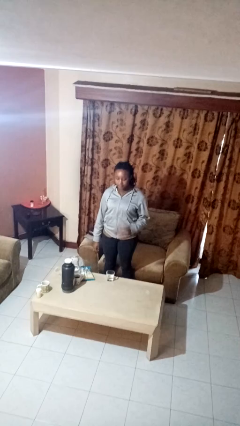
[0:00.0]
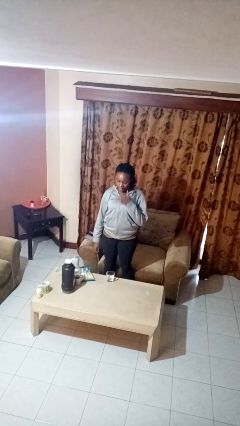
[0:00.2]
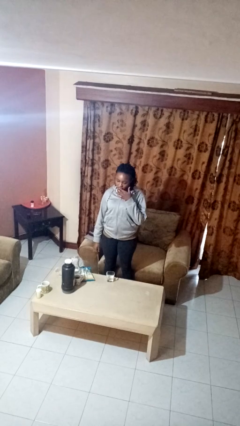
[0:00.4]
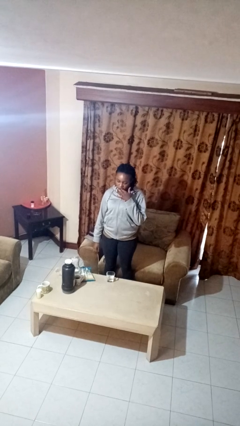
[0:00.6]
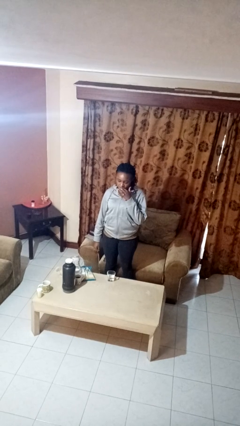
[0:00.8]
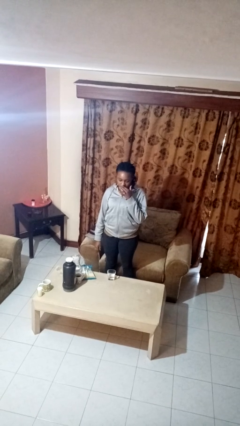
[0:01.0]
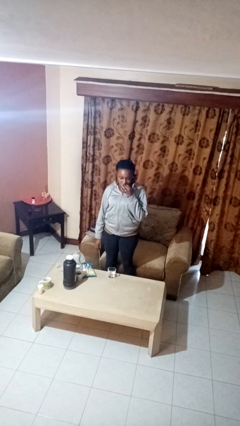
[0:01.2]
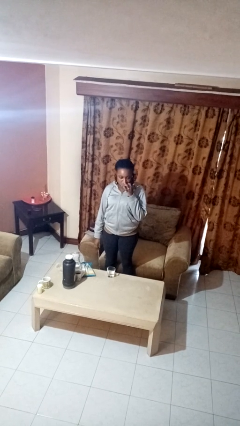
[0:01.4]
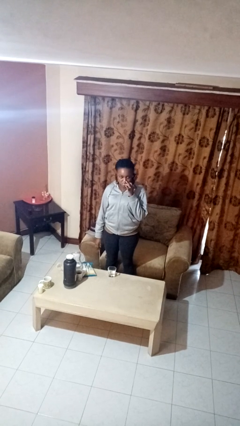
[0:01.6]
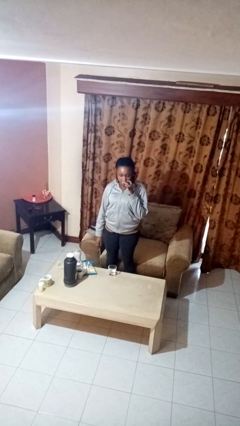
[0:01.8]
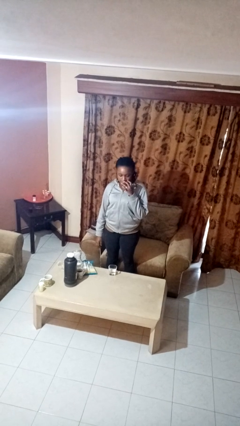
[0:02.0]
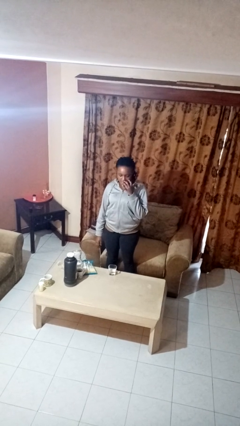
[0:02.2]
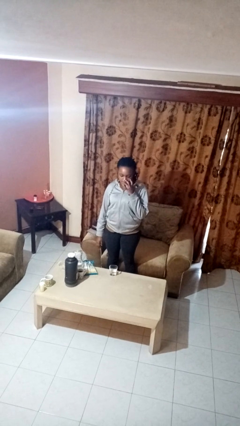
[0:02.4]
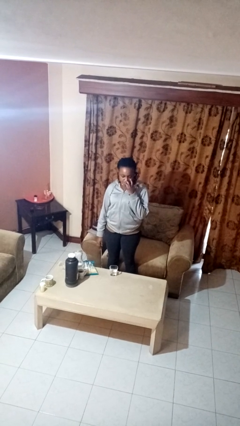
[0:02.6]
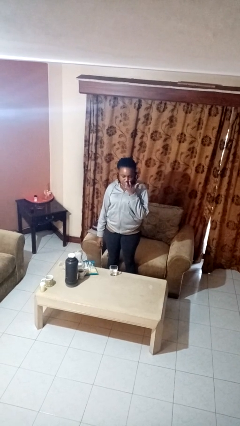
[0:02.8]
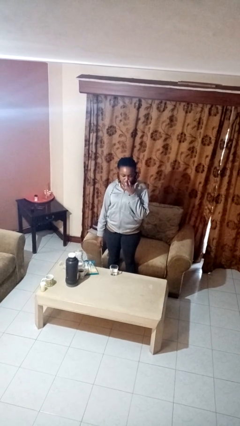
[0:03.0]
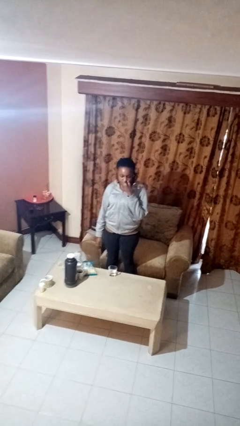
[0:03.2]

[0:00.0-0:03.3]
person licks fingers

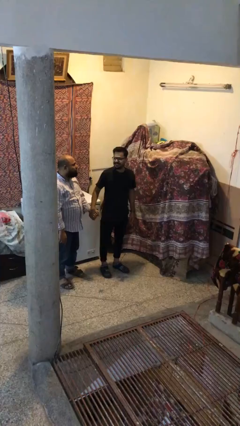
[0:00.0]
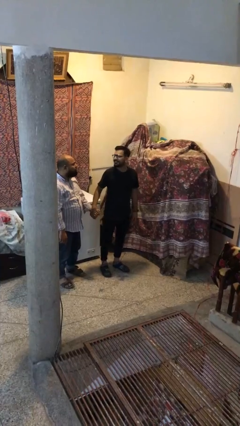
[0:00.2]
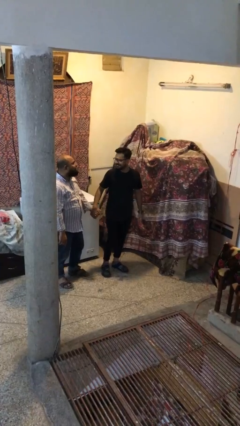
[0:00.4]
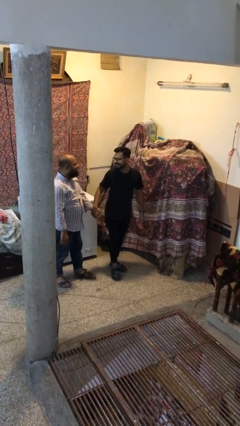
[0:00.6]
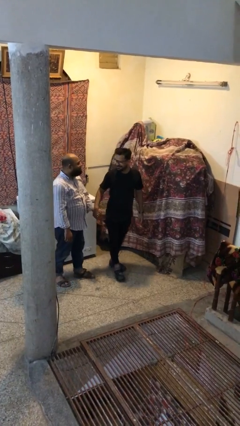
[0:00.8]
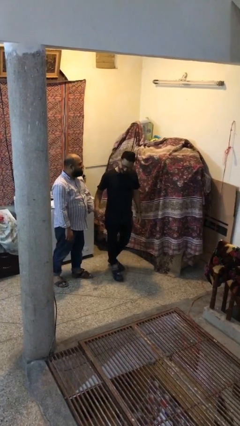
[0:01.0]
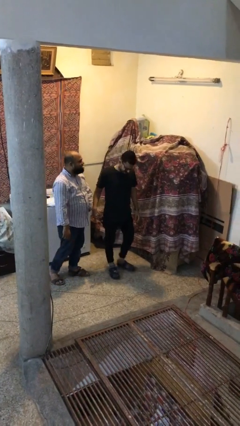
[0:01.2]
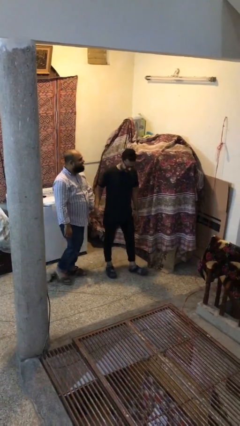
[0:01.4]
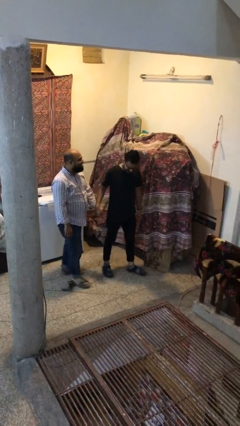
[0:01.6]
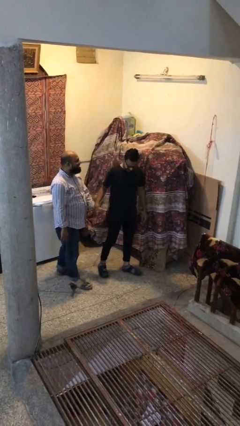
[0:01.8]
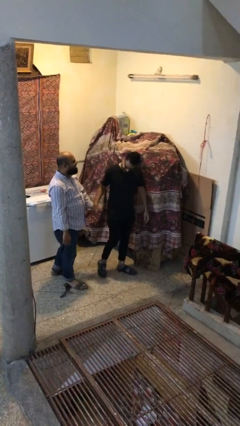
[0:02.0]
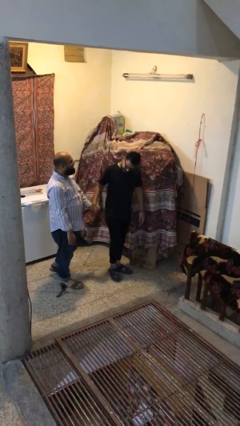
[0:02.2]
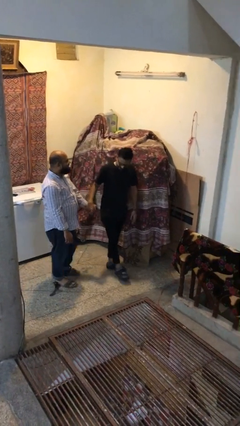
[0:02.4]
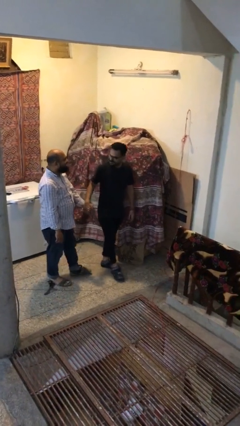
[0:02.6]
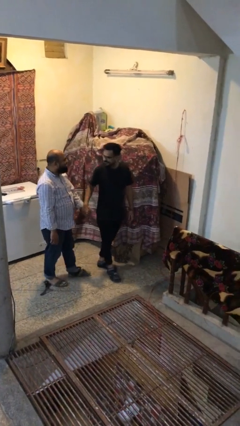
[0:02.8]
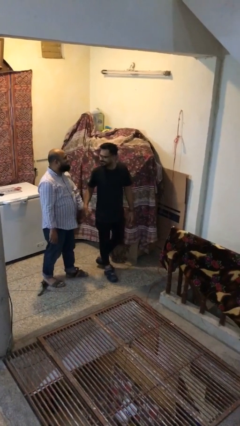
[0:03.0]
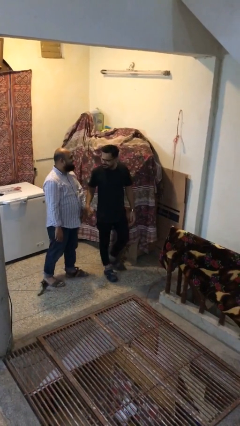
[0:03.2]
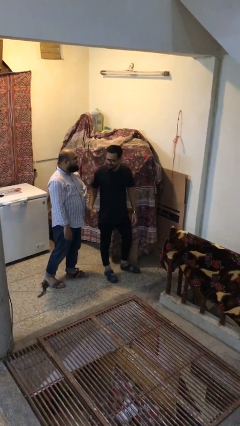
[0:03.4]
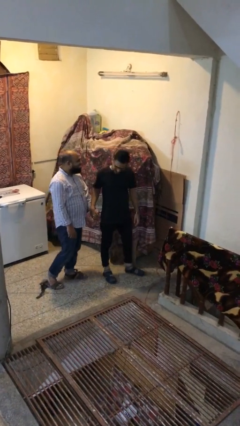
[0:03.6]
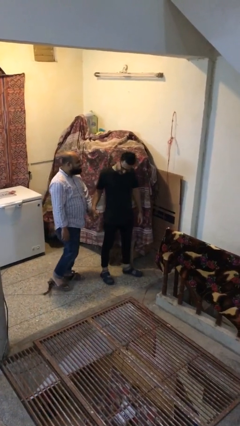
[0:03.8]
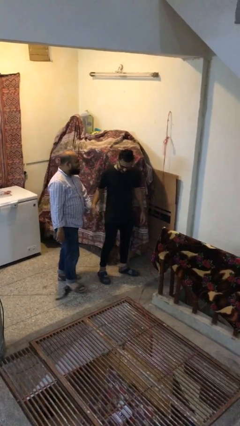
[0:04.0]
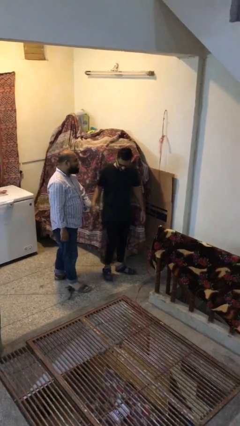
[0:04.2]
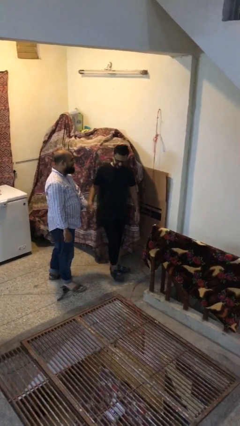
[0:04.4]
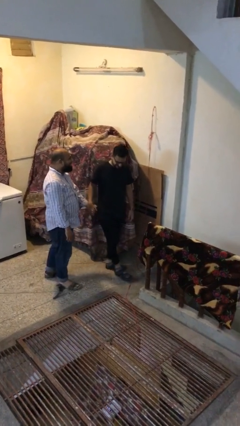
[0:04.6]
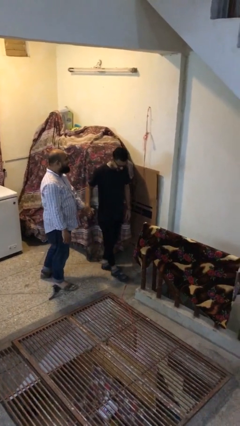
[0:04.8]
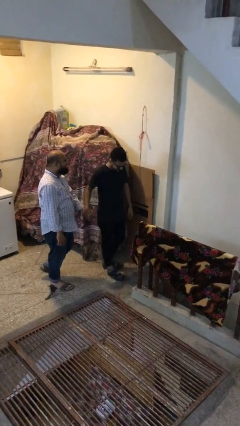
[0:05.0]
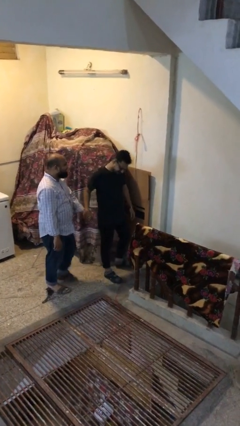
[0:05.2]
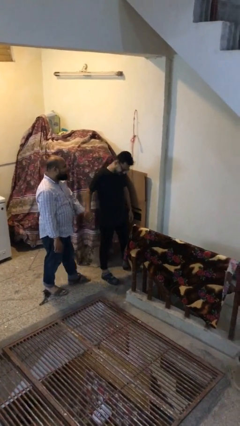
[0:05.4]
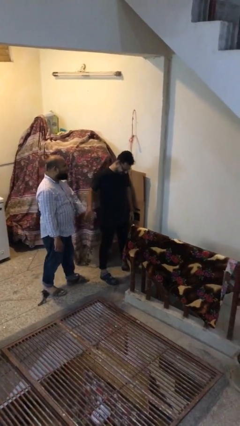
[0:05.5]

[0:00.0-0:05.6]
person holds hand

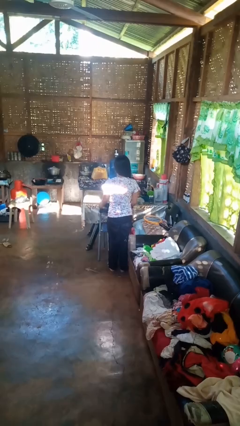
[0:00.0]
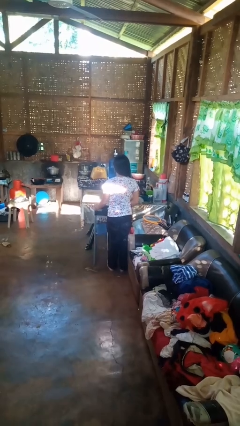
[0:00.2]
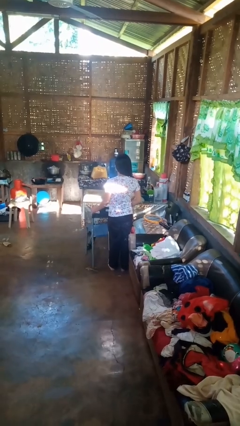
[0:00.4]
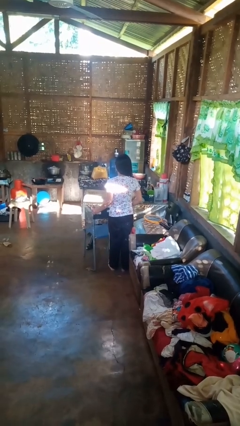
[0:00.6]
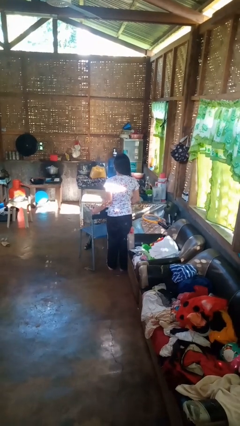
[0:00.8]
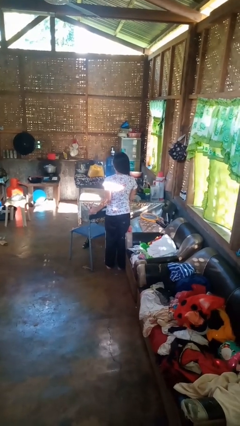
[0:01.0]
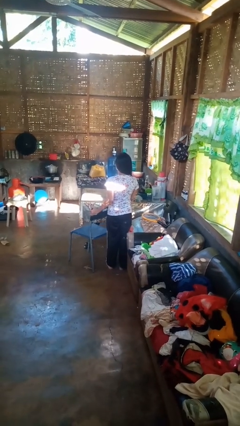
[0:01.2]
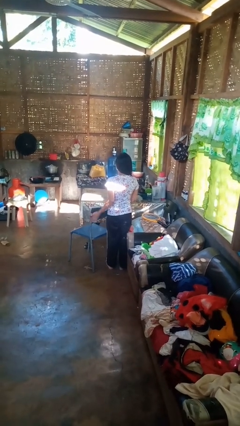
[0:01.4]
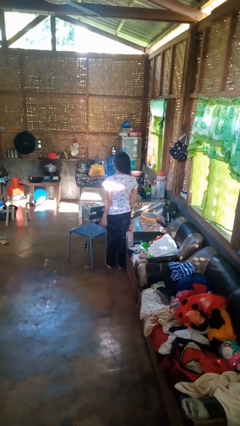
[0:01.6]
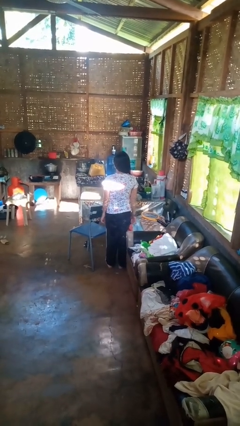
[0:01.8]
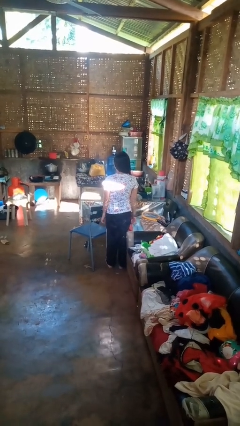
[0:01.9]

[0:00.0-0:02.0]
person pulls out chair

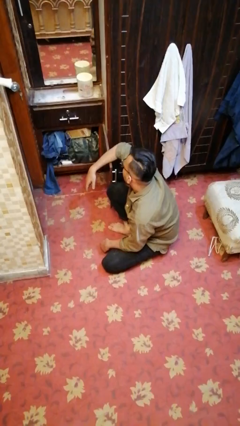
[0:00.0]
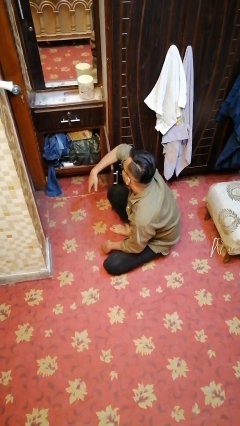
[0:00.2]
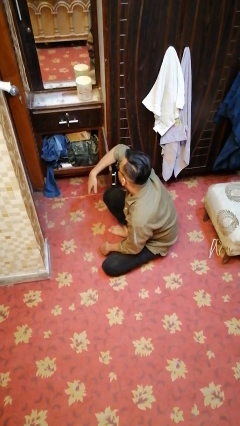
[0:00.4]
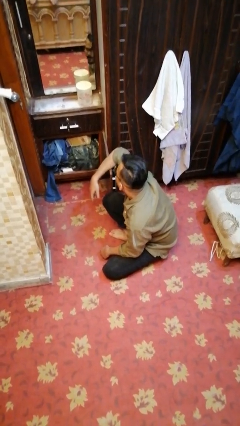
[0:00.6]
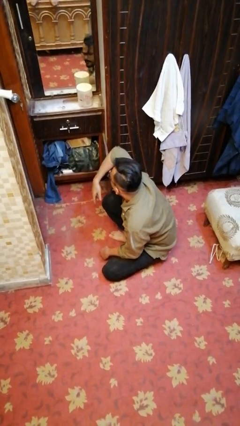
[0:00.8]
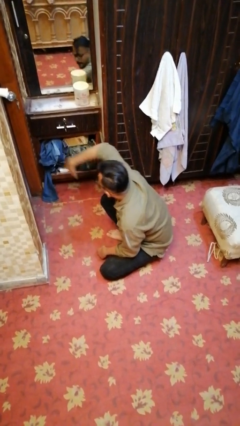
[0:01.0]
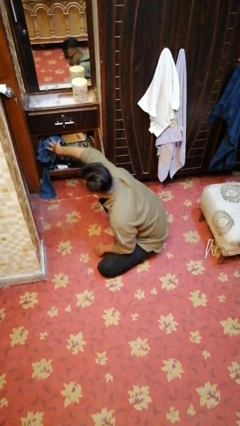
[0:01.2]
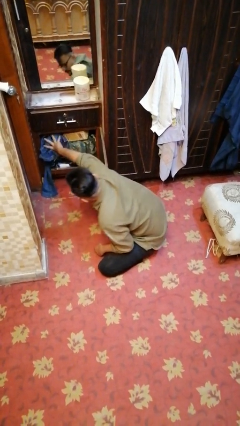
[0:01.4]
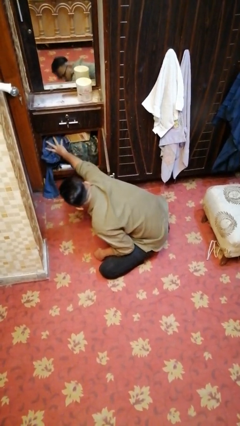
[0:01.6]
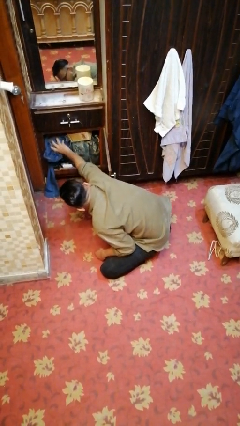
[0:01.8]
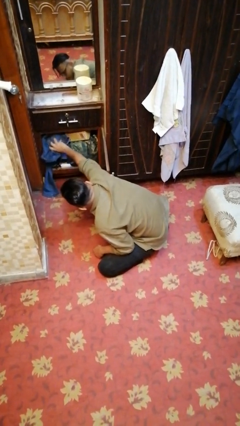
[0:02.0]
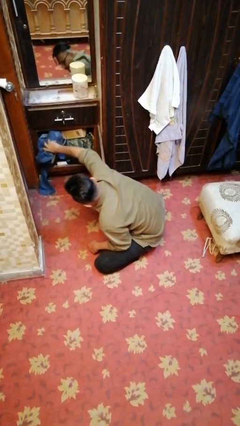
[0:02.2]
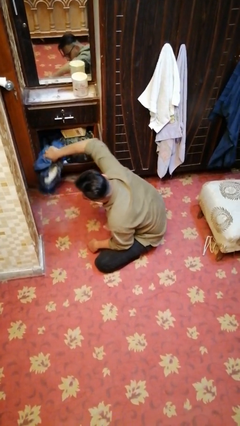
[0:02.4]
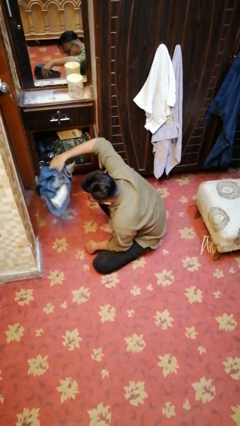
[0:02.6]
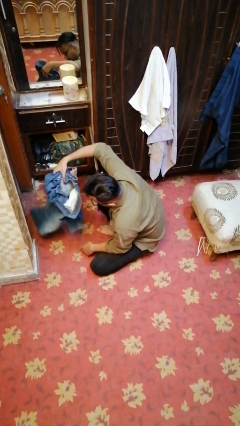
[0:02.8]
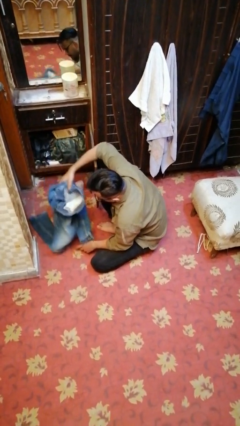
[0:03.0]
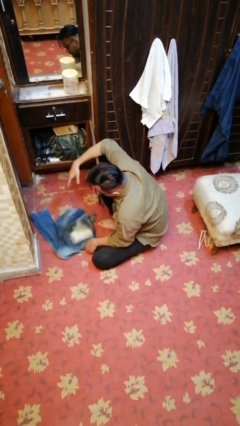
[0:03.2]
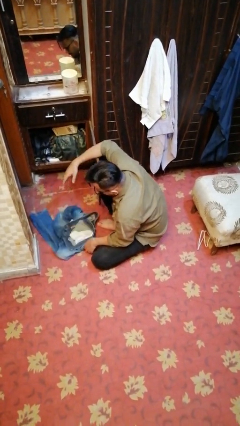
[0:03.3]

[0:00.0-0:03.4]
person takes clothes from dresser

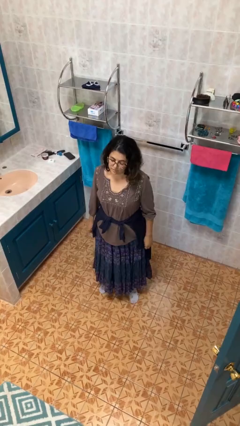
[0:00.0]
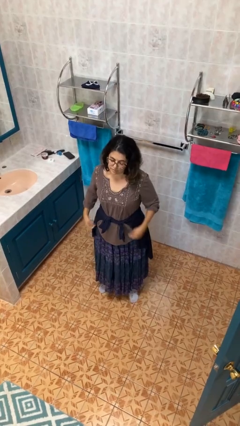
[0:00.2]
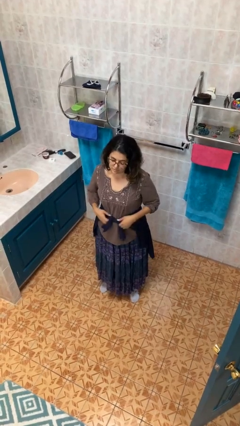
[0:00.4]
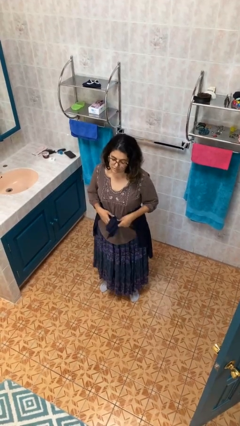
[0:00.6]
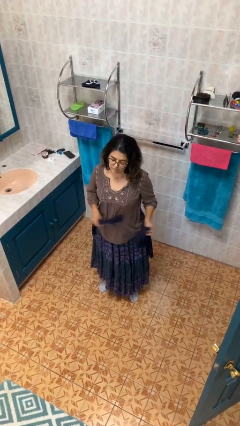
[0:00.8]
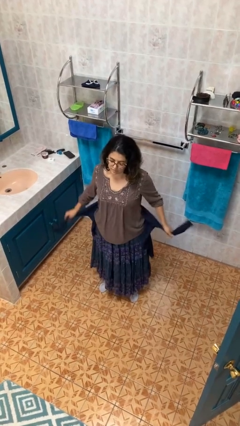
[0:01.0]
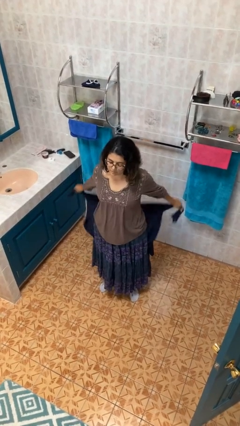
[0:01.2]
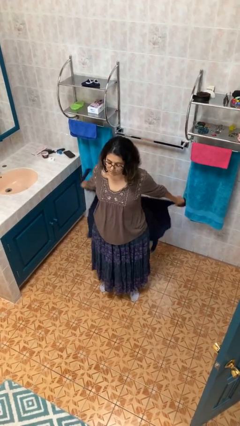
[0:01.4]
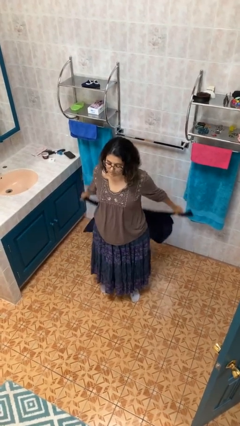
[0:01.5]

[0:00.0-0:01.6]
person unties jacket around waist

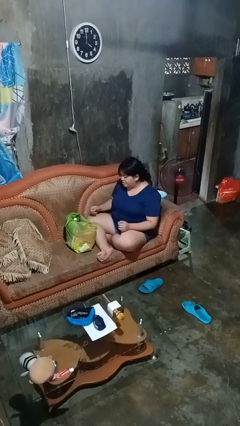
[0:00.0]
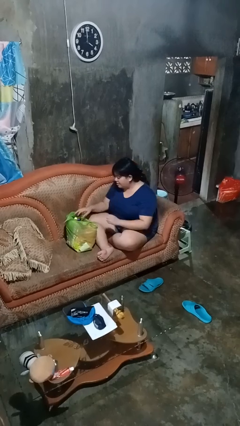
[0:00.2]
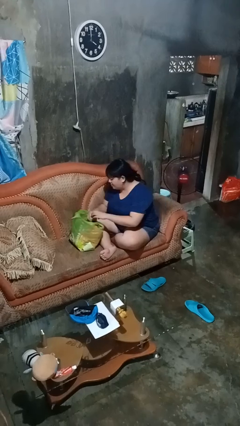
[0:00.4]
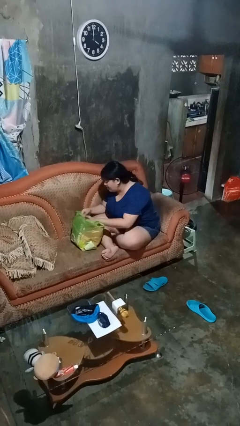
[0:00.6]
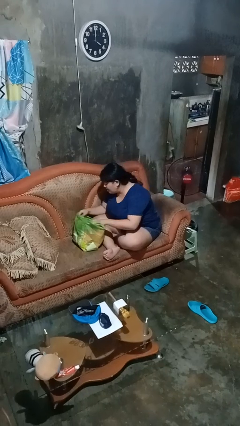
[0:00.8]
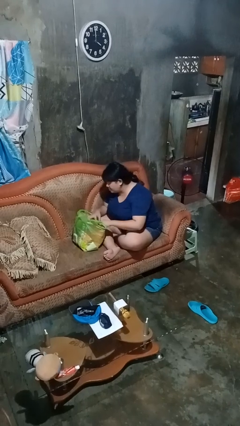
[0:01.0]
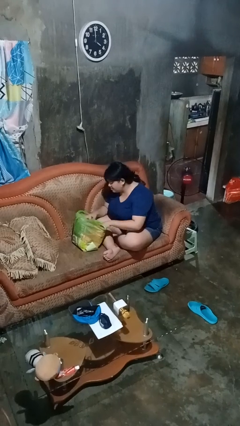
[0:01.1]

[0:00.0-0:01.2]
person searches in bag

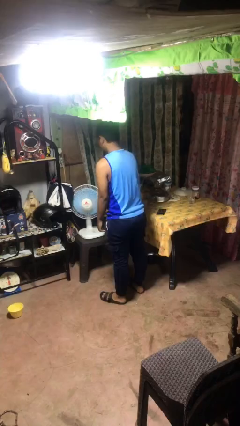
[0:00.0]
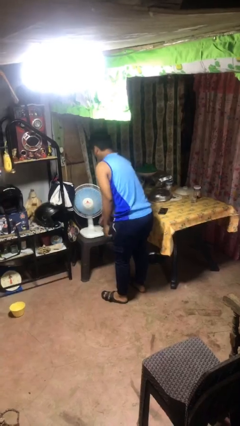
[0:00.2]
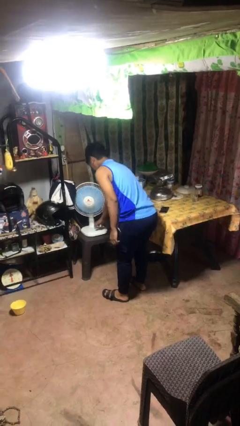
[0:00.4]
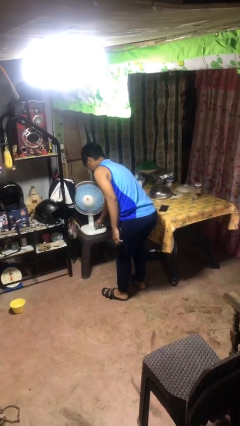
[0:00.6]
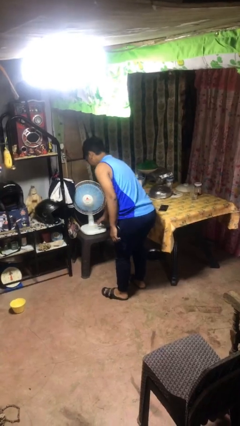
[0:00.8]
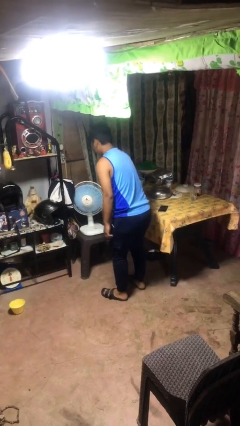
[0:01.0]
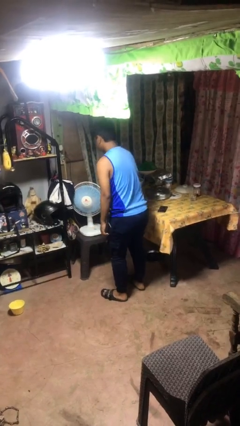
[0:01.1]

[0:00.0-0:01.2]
person turns on fan
